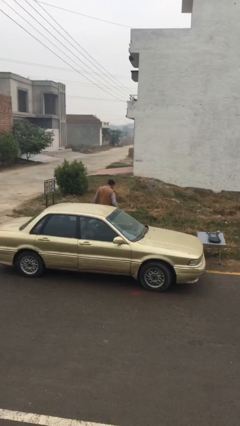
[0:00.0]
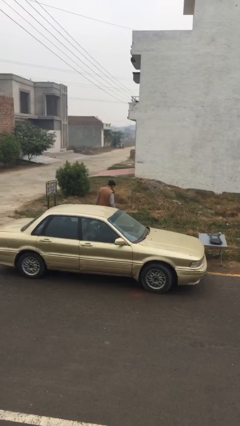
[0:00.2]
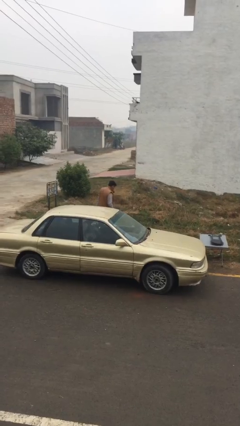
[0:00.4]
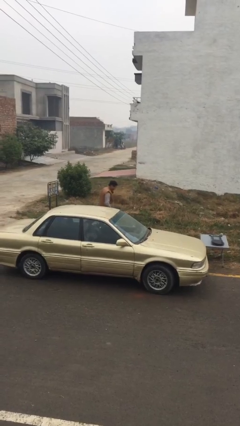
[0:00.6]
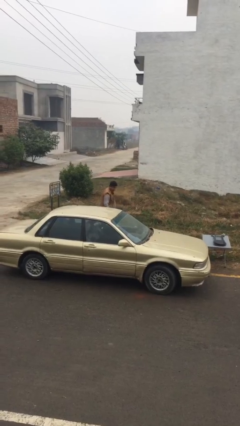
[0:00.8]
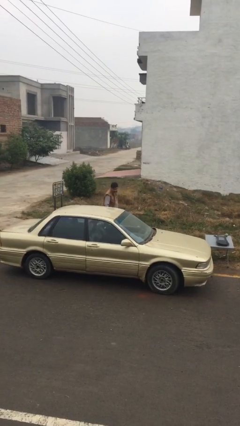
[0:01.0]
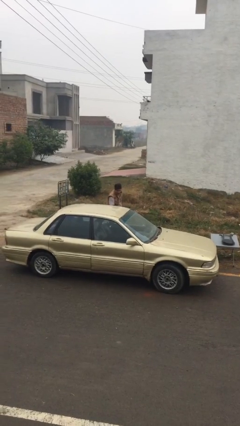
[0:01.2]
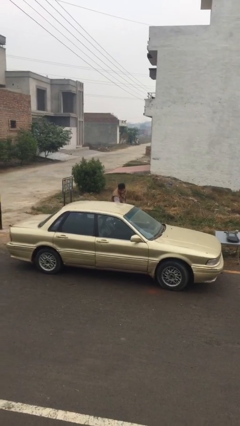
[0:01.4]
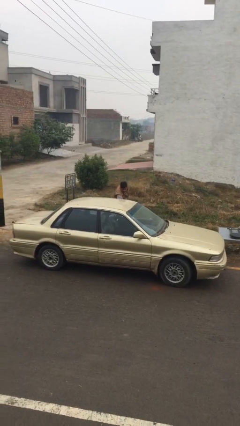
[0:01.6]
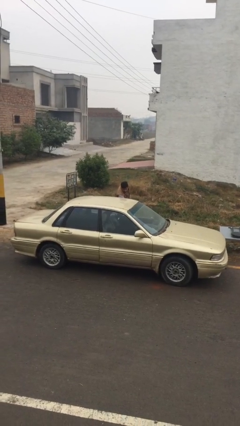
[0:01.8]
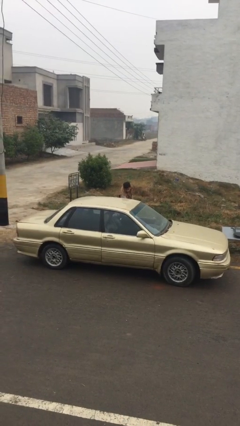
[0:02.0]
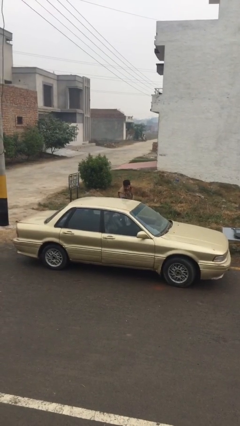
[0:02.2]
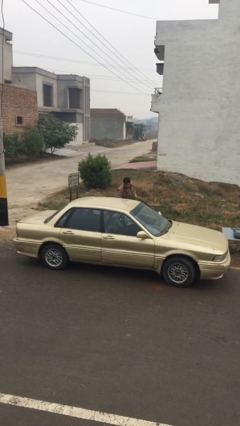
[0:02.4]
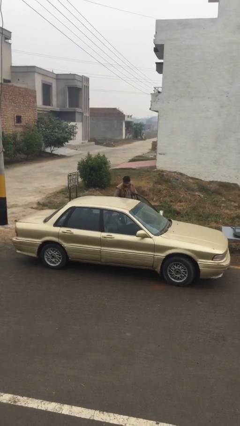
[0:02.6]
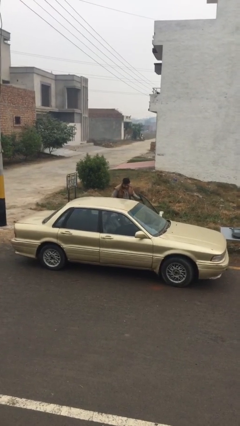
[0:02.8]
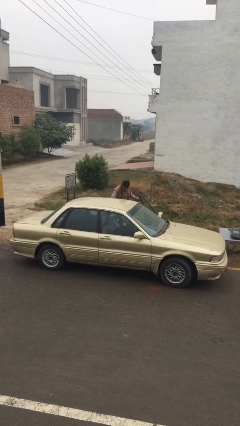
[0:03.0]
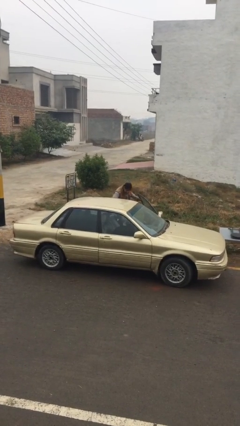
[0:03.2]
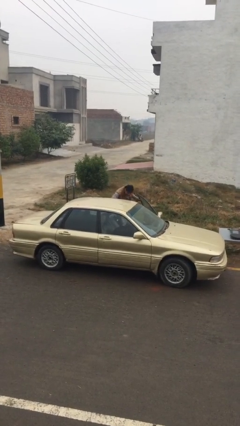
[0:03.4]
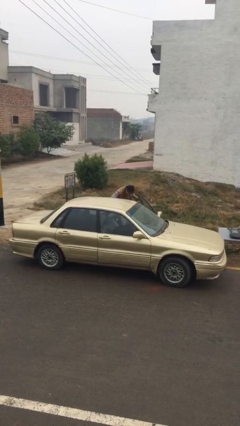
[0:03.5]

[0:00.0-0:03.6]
person opens car door

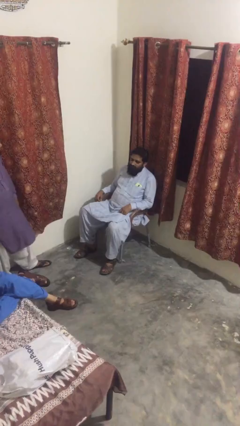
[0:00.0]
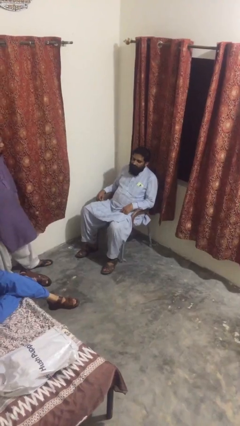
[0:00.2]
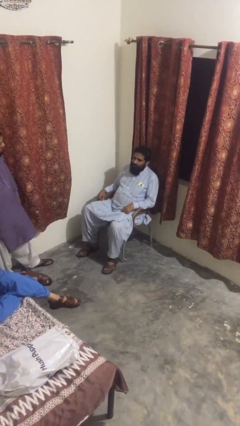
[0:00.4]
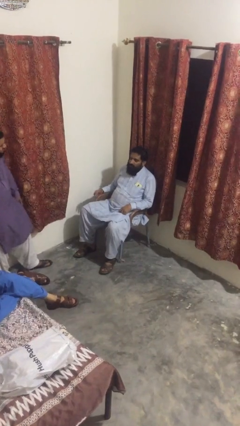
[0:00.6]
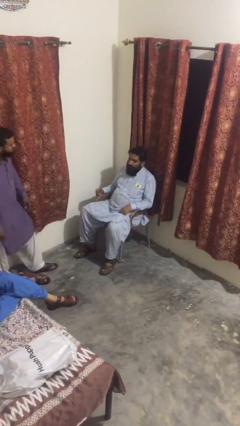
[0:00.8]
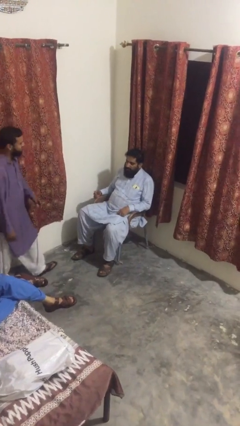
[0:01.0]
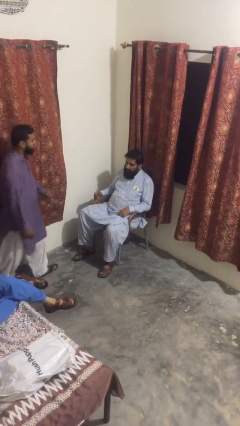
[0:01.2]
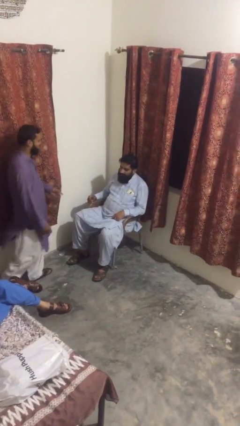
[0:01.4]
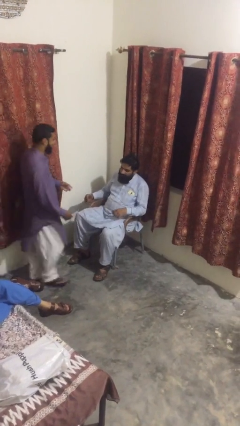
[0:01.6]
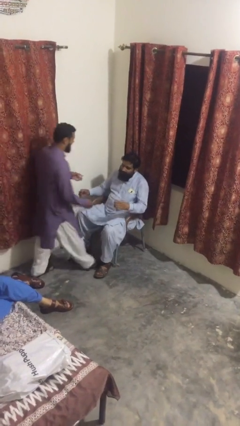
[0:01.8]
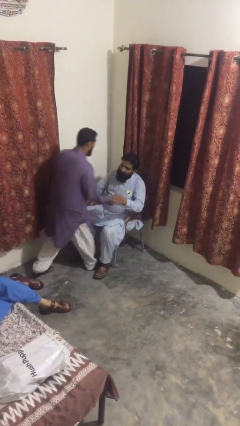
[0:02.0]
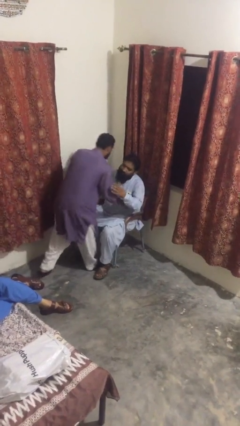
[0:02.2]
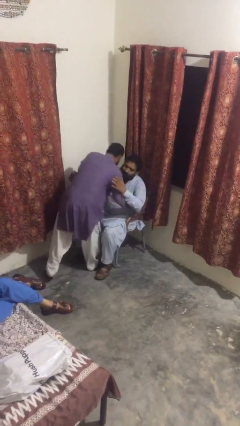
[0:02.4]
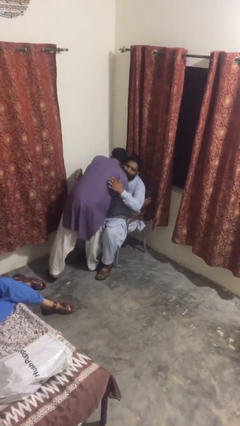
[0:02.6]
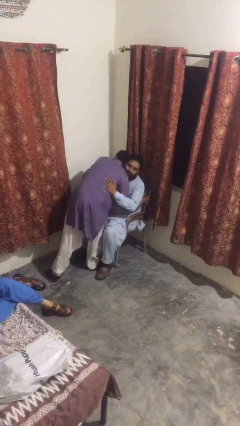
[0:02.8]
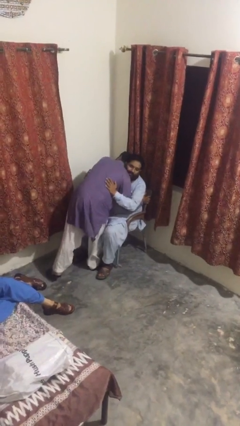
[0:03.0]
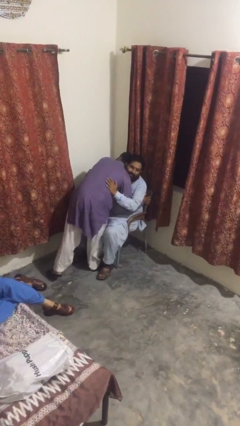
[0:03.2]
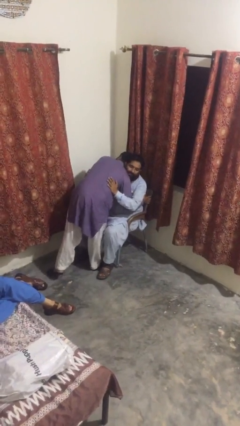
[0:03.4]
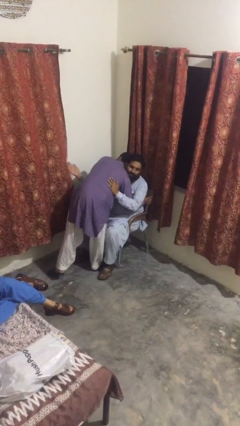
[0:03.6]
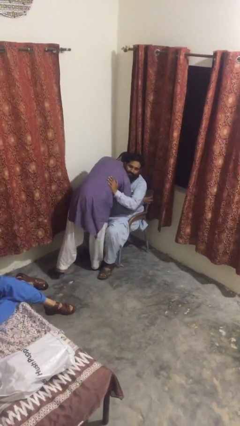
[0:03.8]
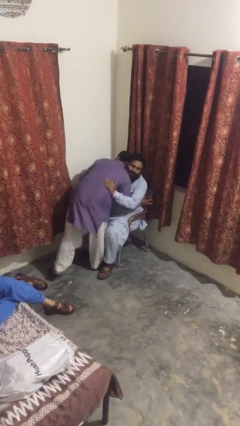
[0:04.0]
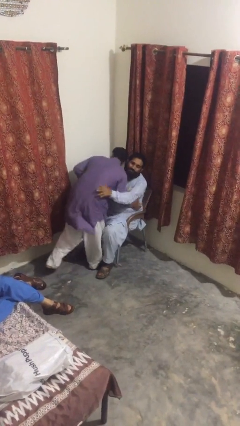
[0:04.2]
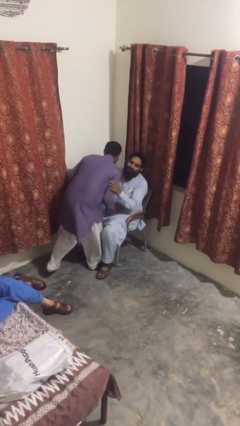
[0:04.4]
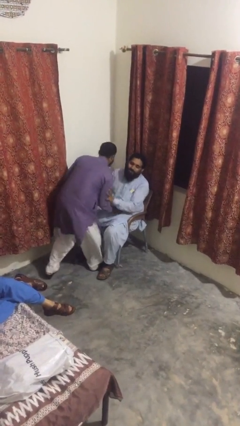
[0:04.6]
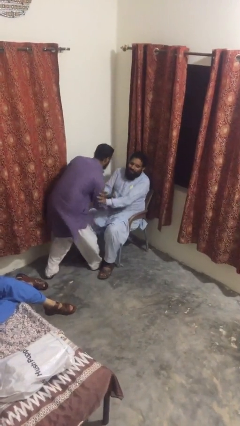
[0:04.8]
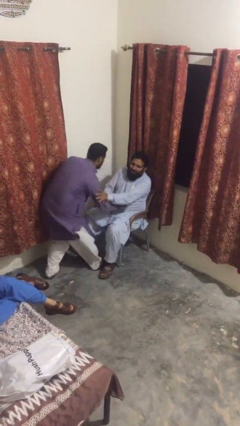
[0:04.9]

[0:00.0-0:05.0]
person embraces person

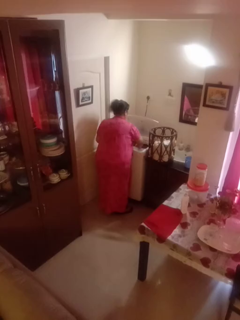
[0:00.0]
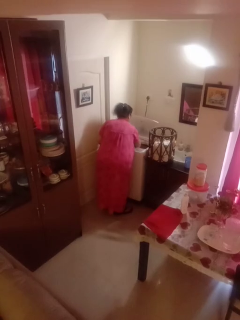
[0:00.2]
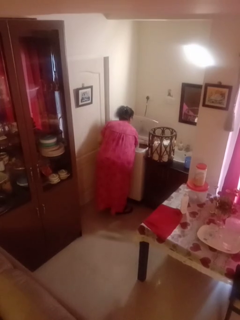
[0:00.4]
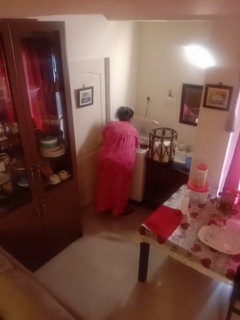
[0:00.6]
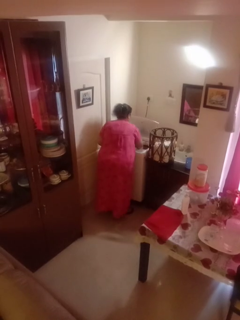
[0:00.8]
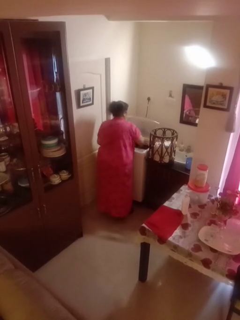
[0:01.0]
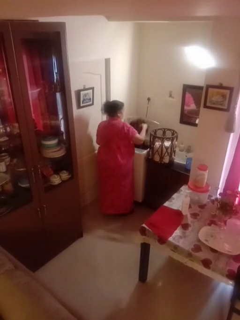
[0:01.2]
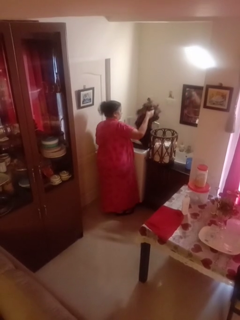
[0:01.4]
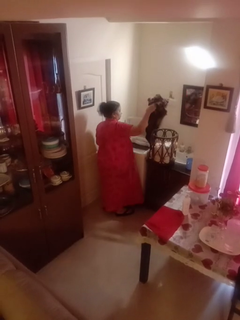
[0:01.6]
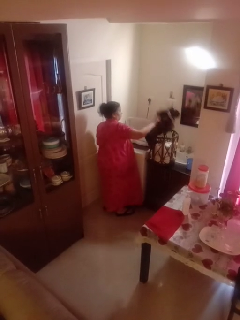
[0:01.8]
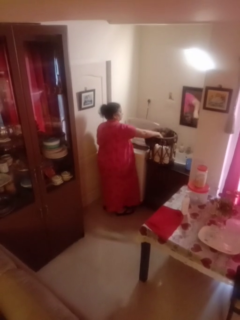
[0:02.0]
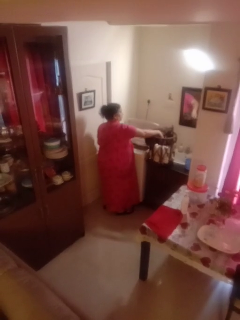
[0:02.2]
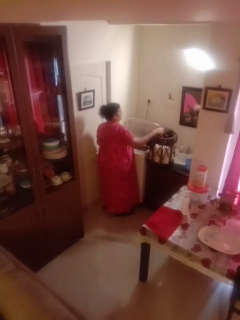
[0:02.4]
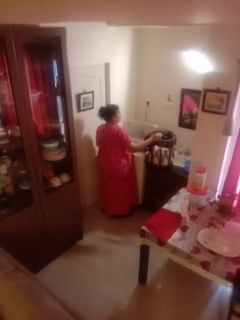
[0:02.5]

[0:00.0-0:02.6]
person unloads dryer

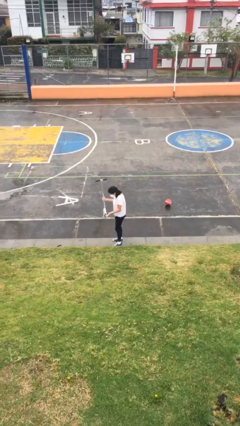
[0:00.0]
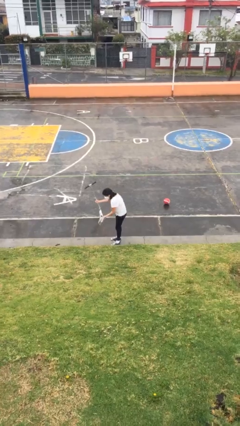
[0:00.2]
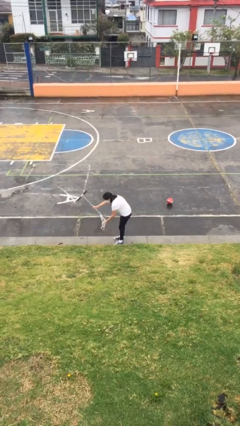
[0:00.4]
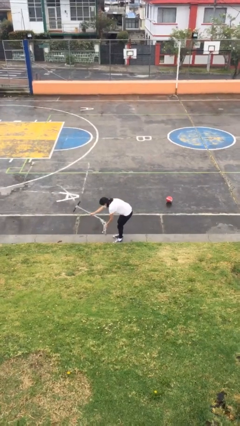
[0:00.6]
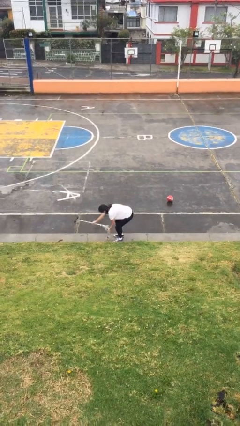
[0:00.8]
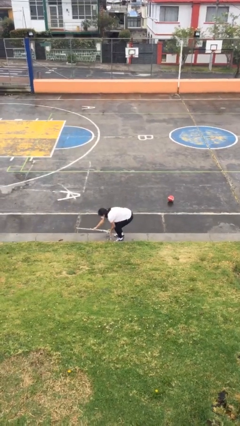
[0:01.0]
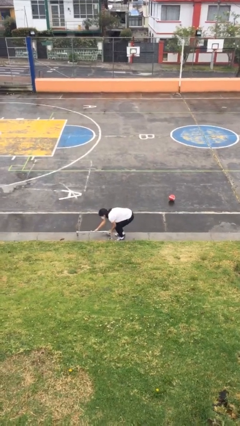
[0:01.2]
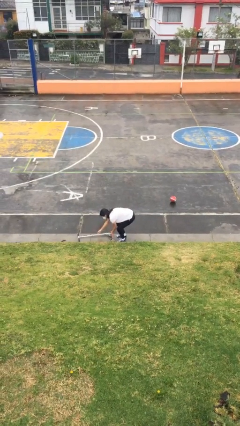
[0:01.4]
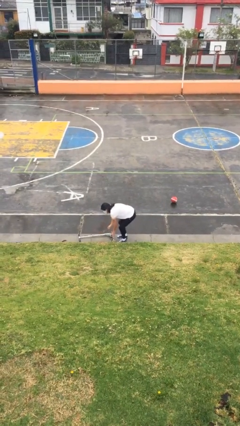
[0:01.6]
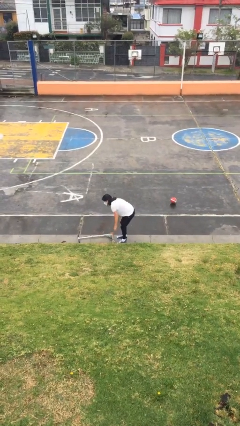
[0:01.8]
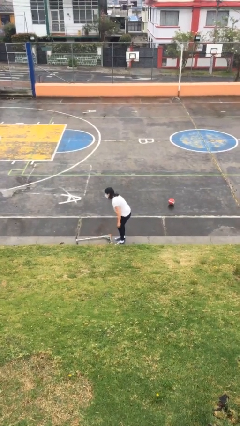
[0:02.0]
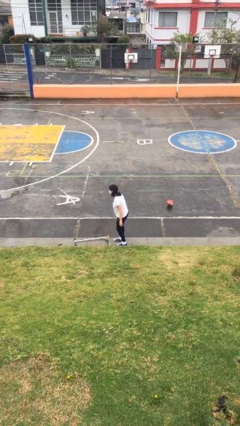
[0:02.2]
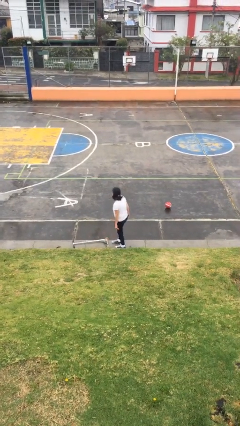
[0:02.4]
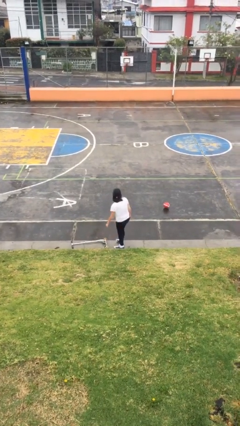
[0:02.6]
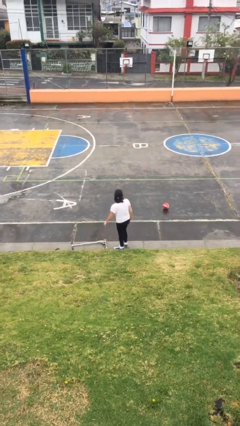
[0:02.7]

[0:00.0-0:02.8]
person puts down object on floor

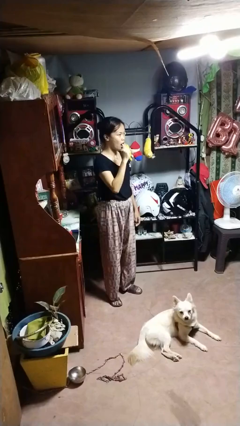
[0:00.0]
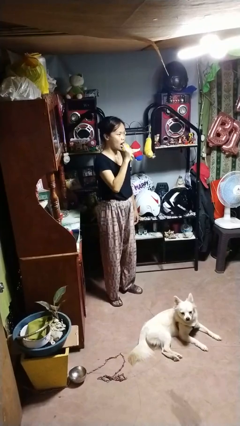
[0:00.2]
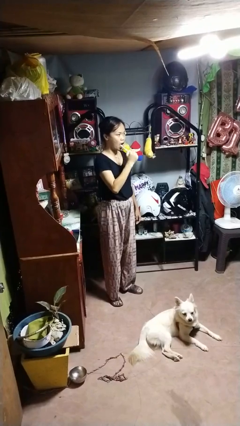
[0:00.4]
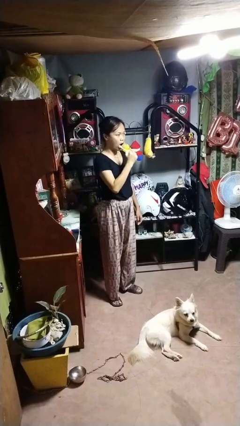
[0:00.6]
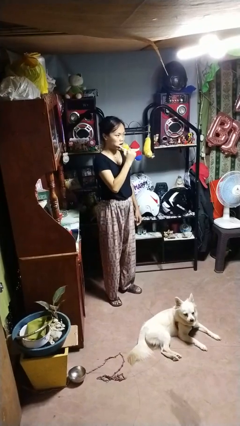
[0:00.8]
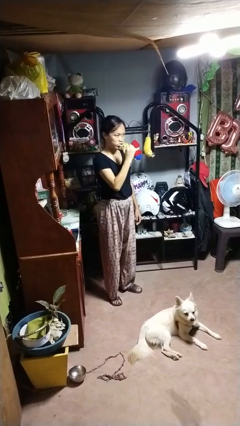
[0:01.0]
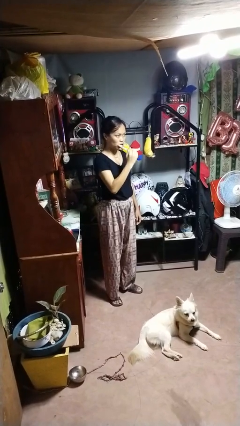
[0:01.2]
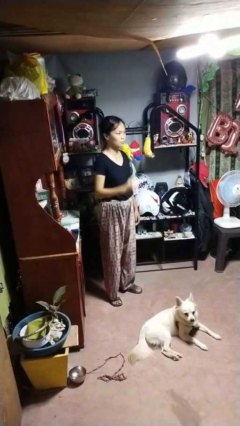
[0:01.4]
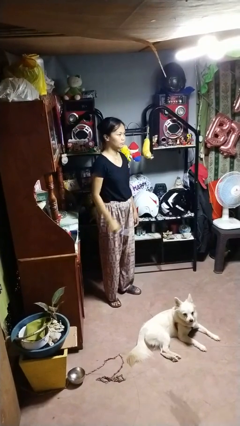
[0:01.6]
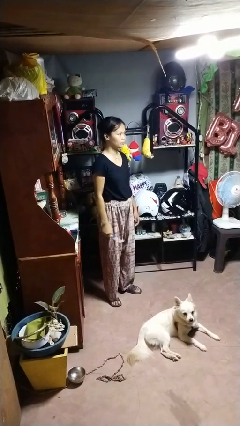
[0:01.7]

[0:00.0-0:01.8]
person brushes teeth

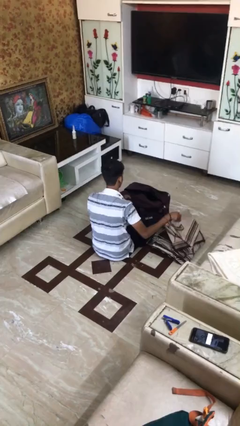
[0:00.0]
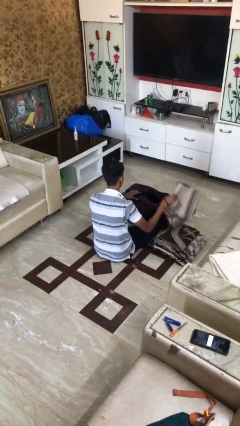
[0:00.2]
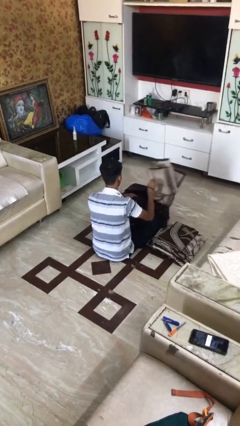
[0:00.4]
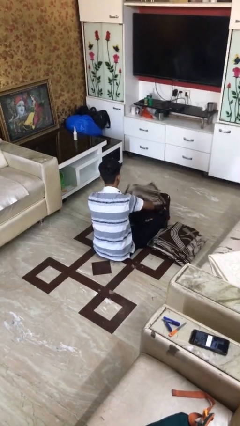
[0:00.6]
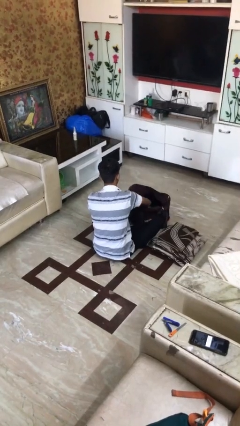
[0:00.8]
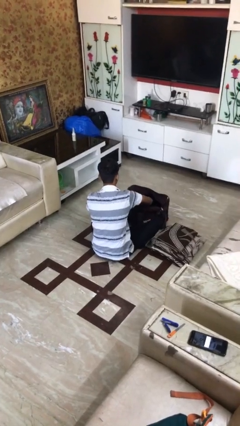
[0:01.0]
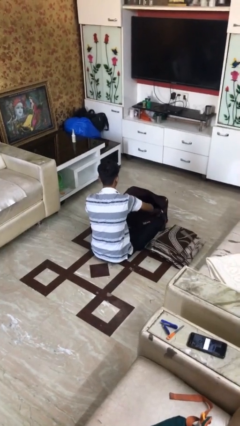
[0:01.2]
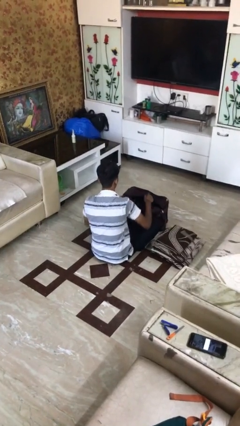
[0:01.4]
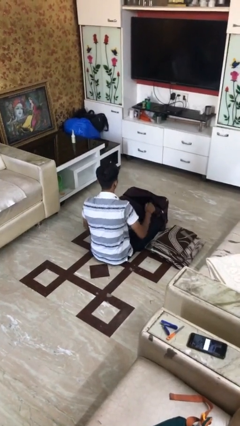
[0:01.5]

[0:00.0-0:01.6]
person loads clothes into suitcase

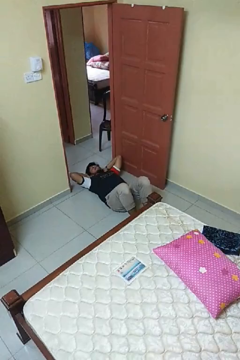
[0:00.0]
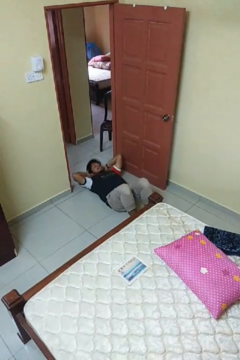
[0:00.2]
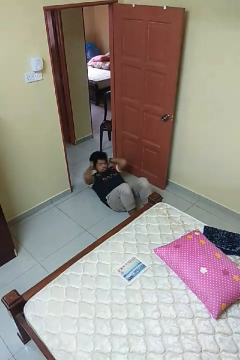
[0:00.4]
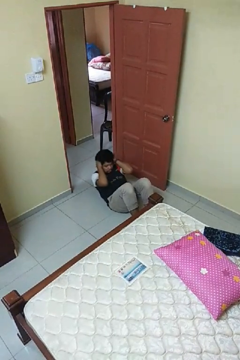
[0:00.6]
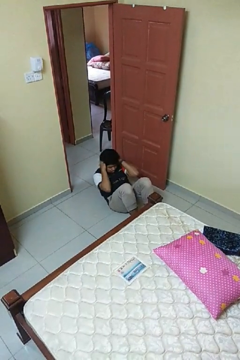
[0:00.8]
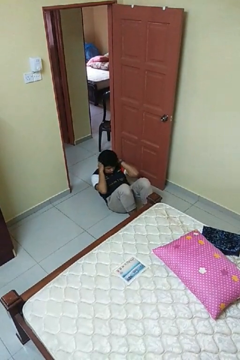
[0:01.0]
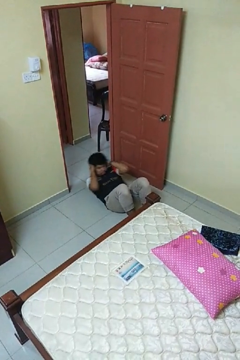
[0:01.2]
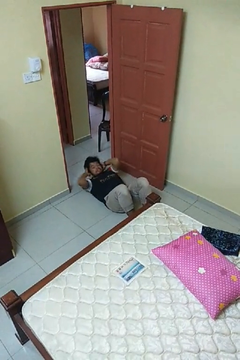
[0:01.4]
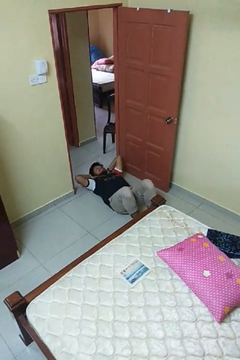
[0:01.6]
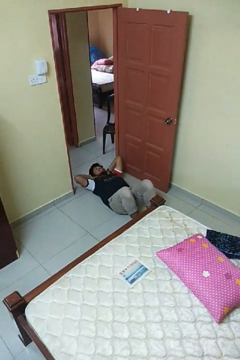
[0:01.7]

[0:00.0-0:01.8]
person exercises with situp
